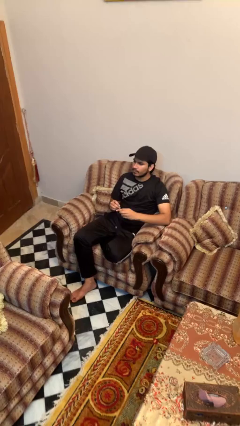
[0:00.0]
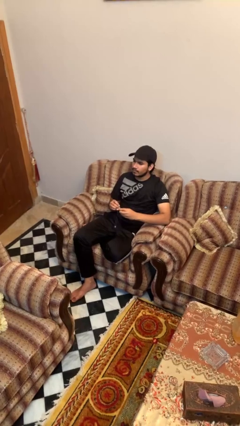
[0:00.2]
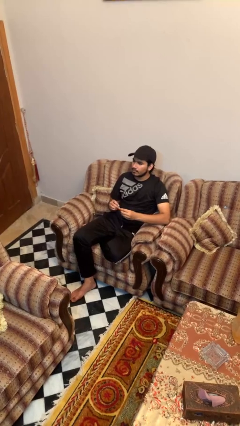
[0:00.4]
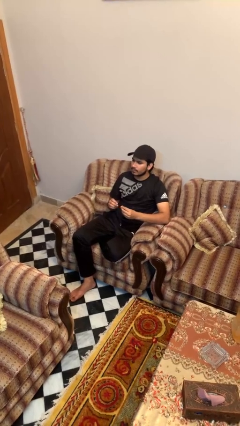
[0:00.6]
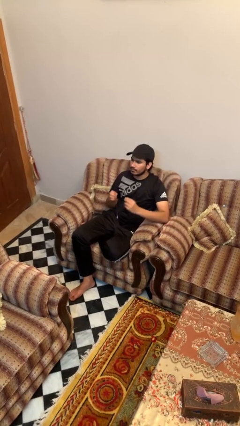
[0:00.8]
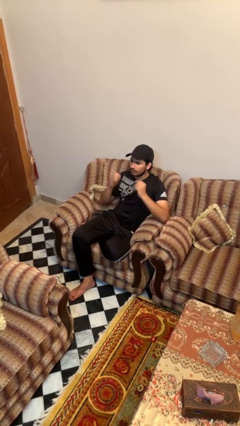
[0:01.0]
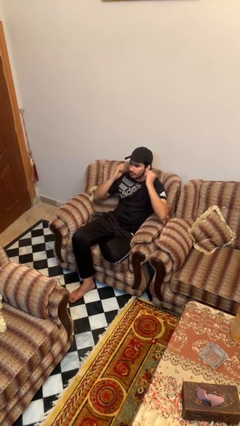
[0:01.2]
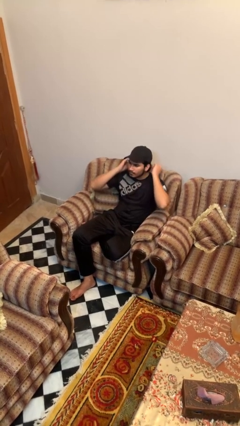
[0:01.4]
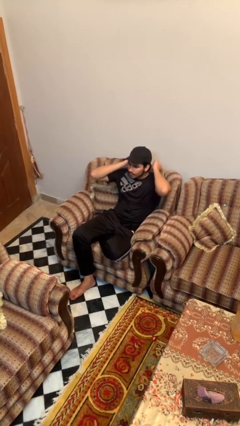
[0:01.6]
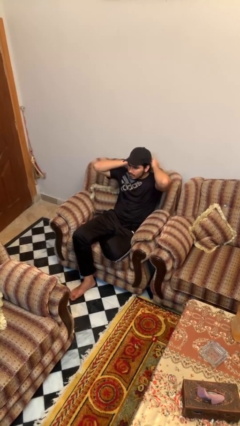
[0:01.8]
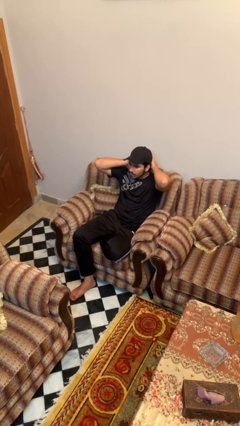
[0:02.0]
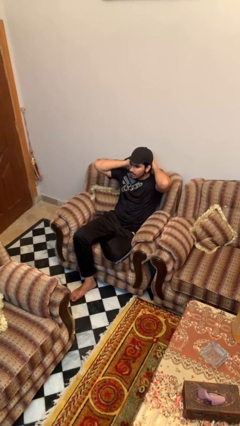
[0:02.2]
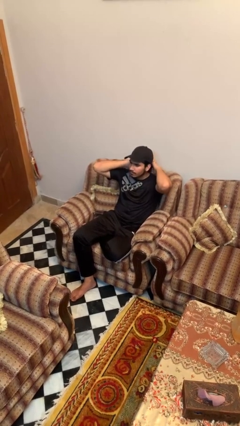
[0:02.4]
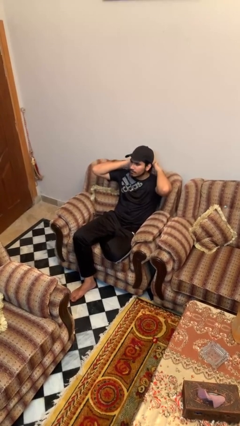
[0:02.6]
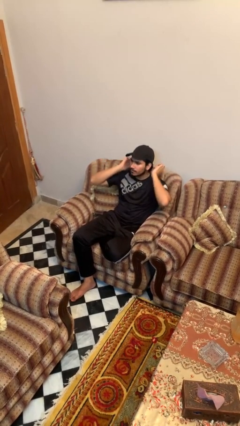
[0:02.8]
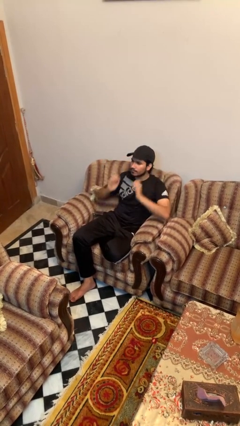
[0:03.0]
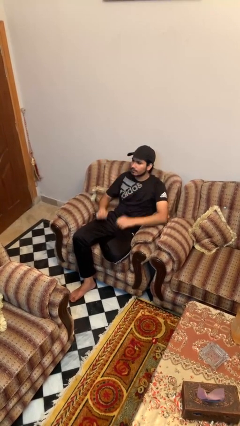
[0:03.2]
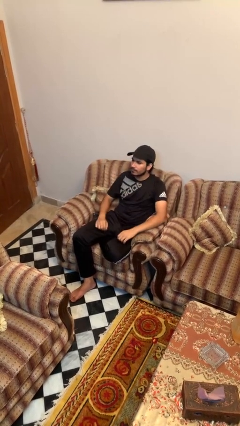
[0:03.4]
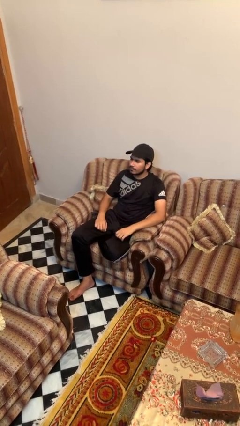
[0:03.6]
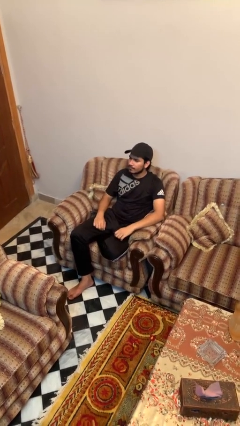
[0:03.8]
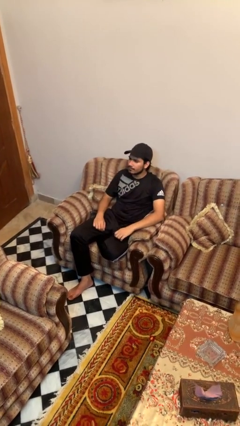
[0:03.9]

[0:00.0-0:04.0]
person puts on necklace

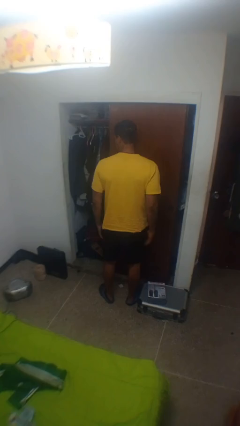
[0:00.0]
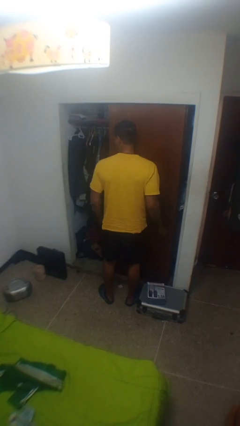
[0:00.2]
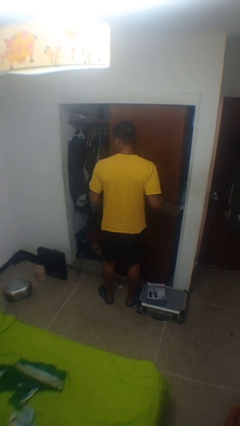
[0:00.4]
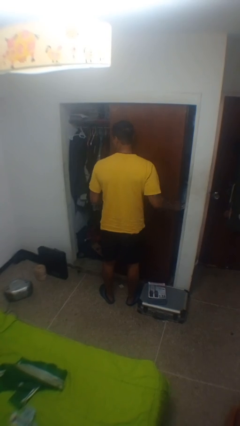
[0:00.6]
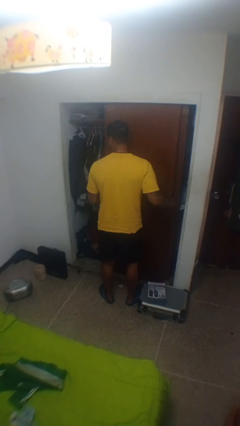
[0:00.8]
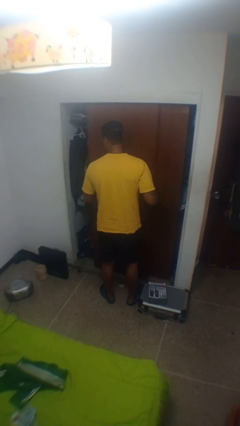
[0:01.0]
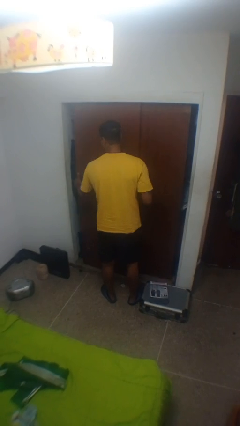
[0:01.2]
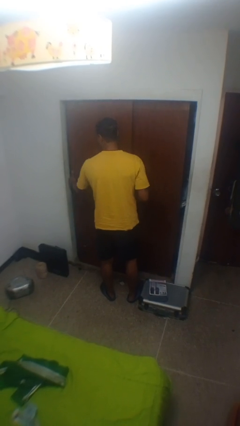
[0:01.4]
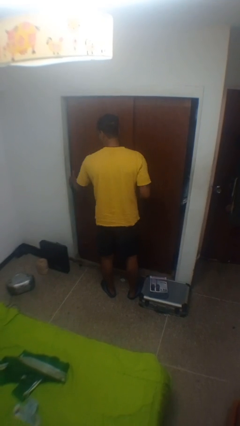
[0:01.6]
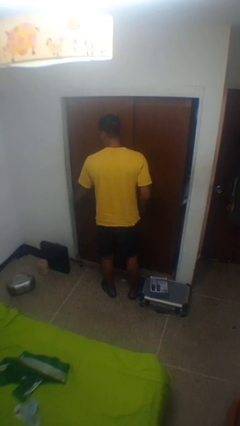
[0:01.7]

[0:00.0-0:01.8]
person closes closet door

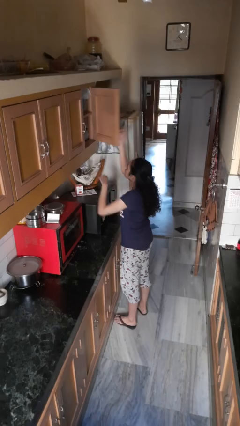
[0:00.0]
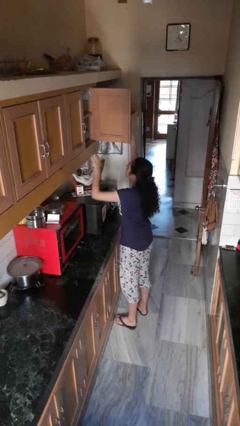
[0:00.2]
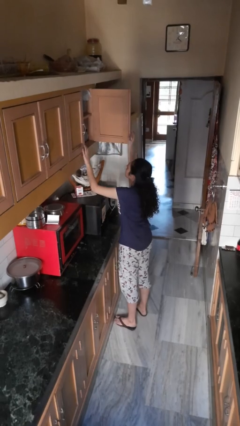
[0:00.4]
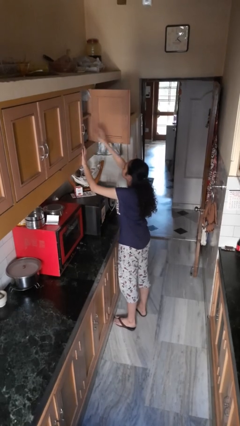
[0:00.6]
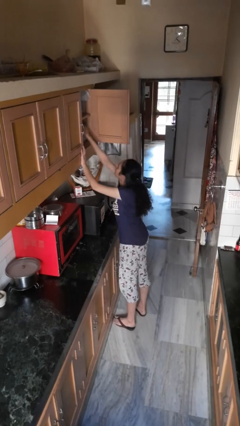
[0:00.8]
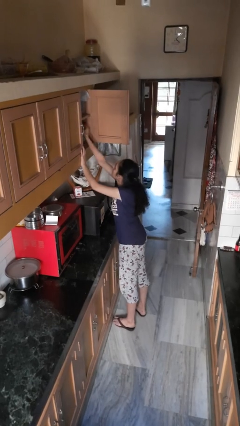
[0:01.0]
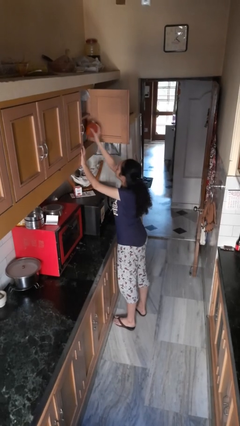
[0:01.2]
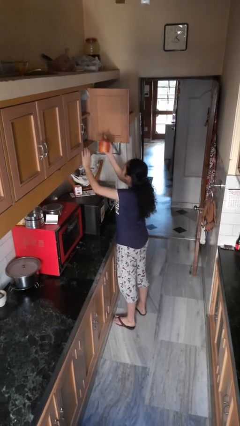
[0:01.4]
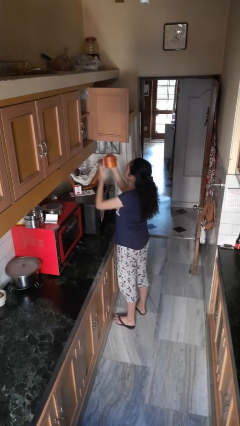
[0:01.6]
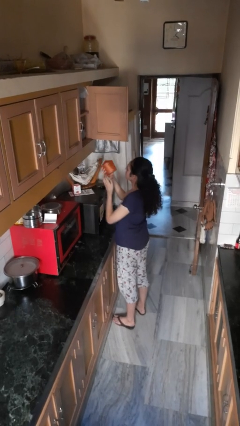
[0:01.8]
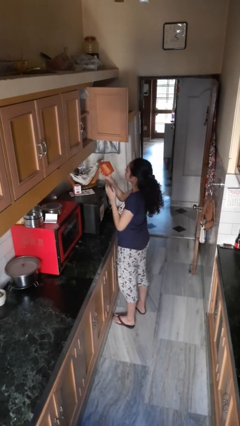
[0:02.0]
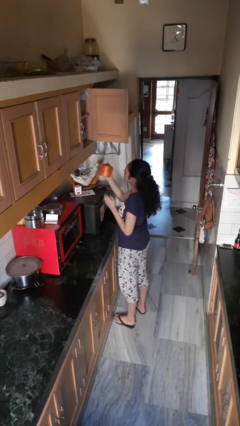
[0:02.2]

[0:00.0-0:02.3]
person takes object from cabinet

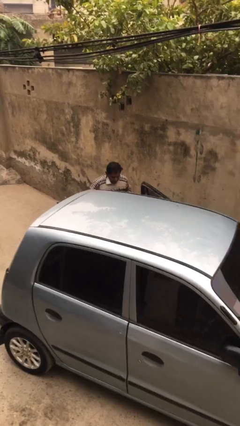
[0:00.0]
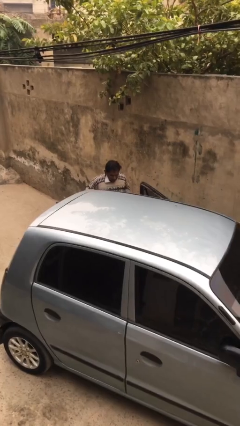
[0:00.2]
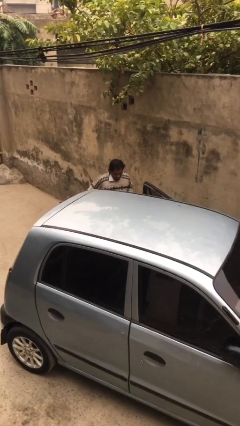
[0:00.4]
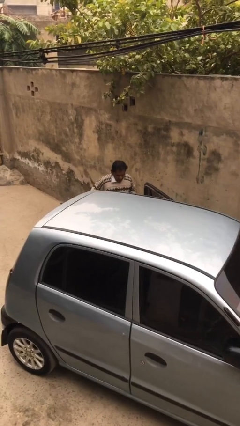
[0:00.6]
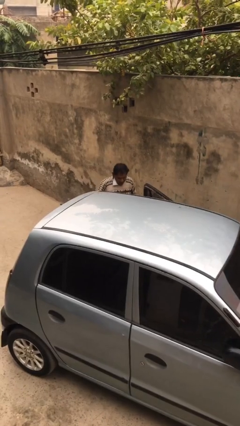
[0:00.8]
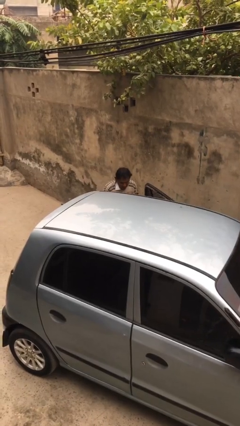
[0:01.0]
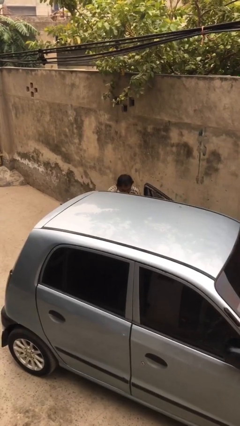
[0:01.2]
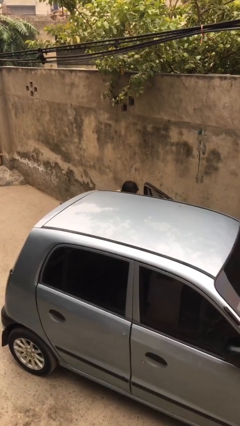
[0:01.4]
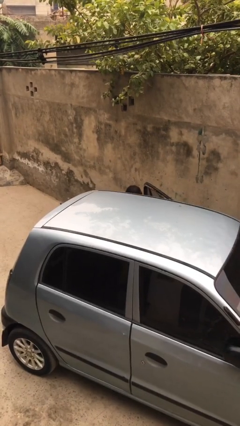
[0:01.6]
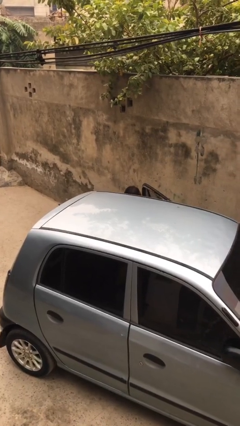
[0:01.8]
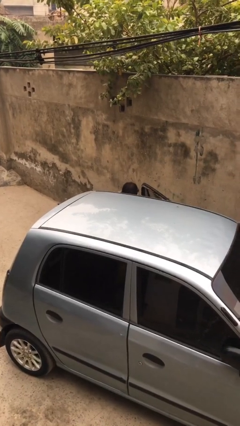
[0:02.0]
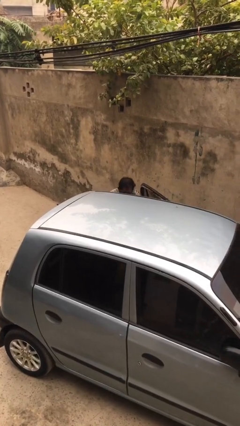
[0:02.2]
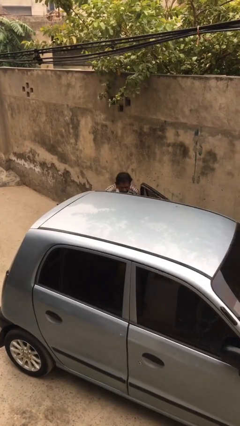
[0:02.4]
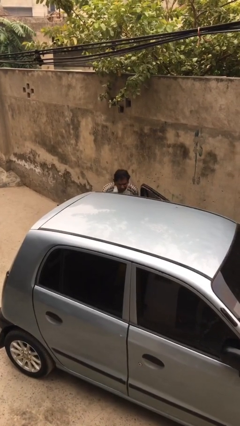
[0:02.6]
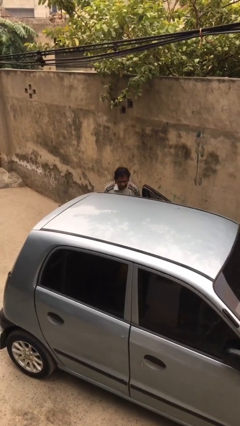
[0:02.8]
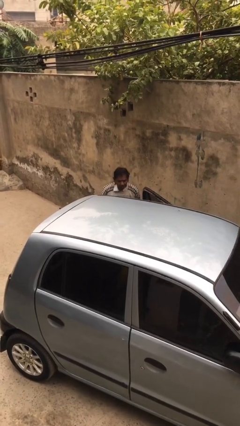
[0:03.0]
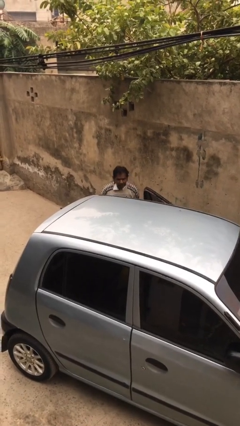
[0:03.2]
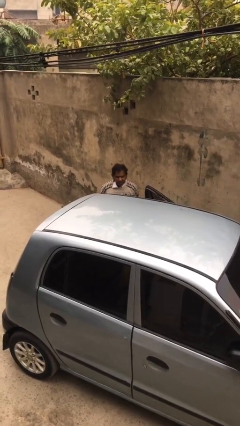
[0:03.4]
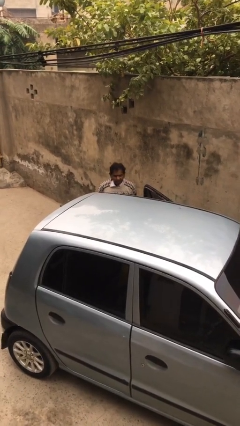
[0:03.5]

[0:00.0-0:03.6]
person unloads car

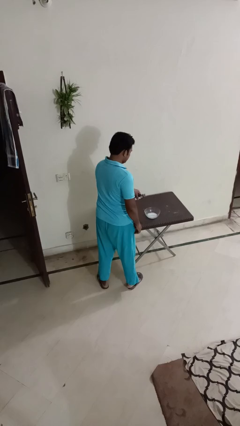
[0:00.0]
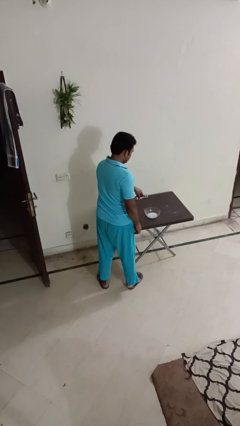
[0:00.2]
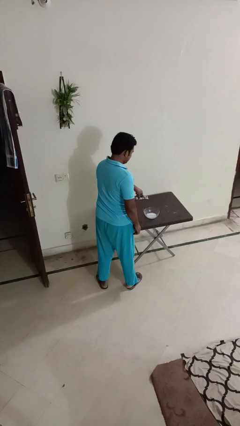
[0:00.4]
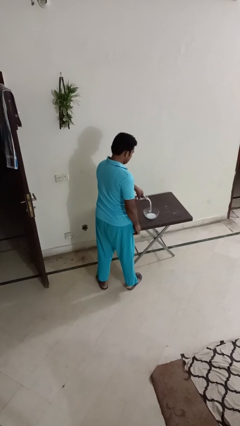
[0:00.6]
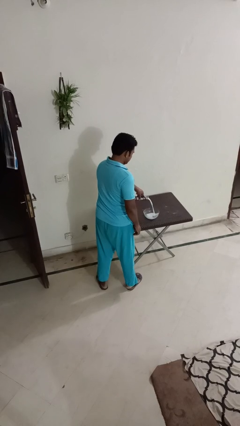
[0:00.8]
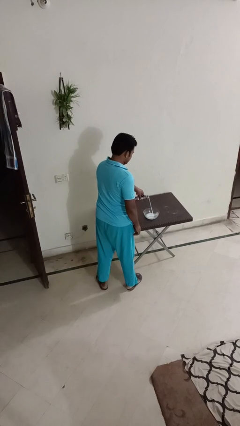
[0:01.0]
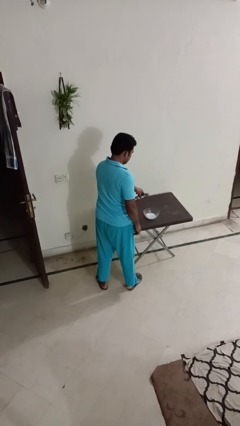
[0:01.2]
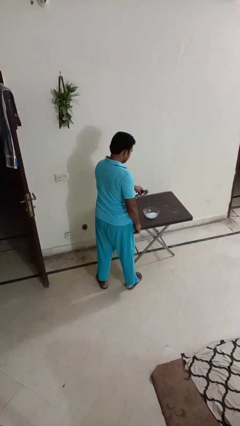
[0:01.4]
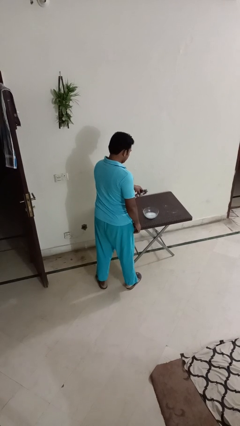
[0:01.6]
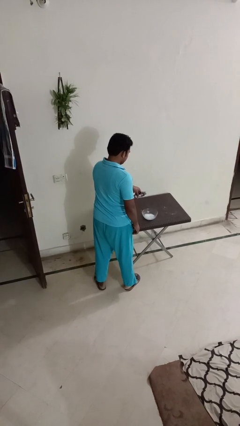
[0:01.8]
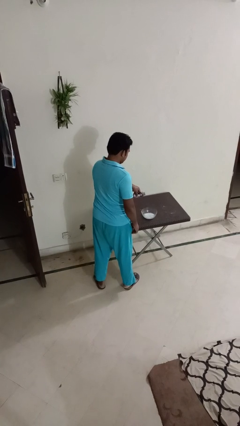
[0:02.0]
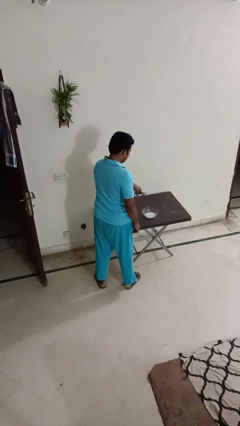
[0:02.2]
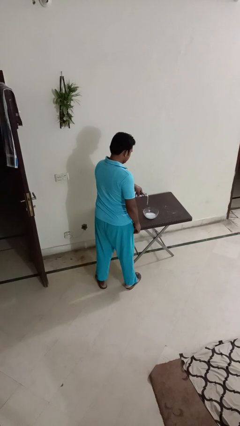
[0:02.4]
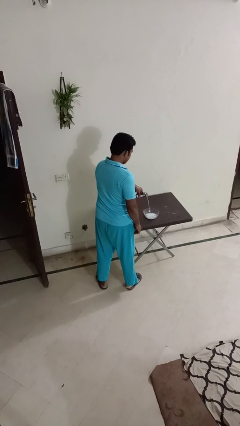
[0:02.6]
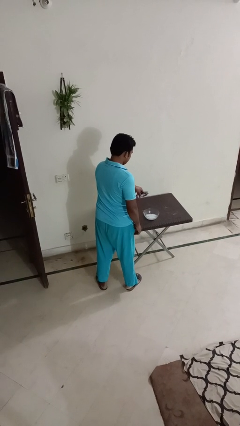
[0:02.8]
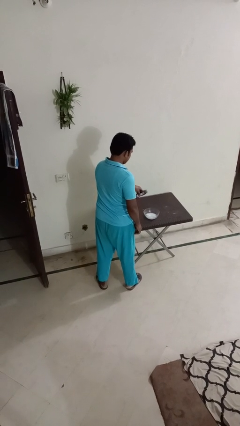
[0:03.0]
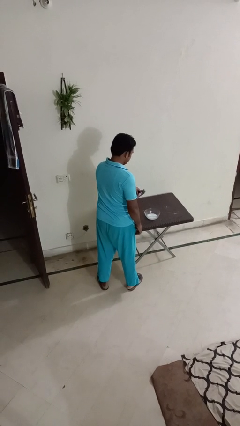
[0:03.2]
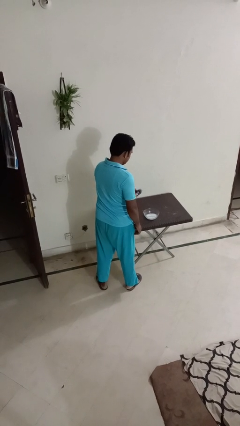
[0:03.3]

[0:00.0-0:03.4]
person pours into bowl

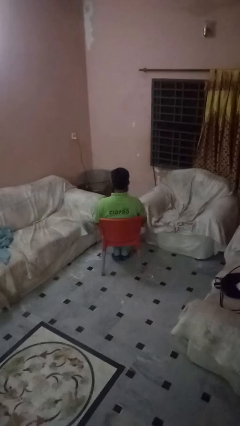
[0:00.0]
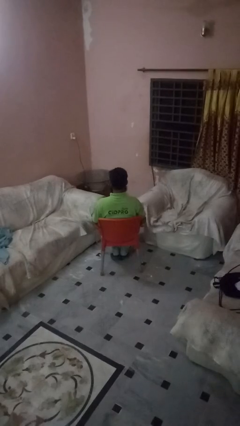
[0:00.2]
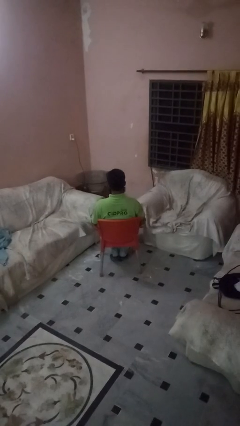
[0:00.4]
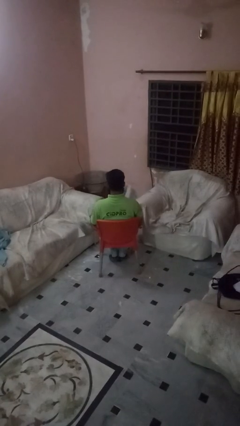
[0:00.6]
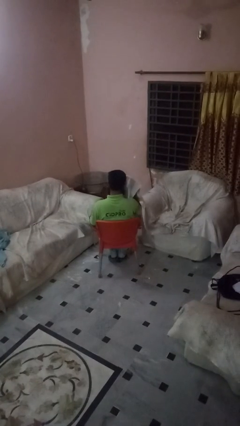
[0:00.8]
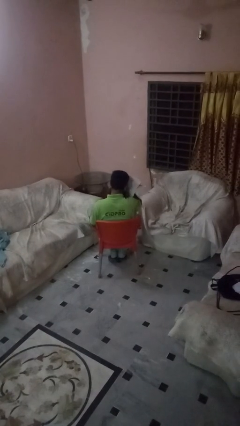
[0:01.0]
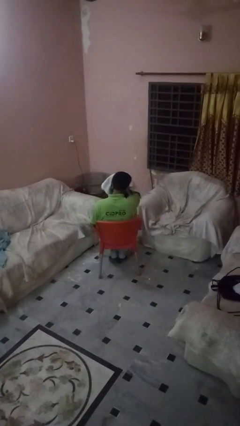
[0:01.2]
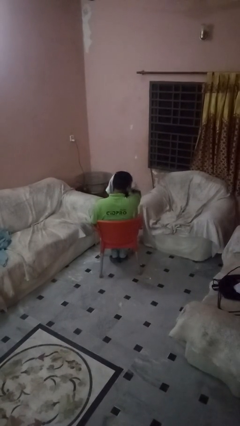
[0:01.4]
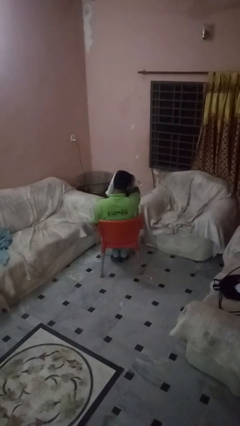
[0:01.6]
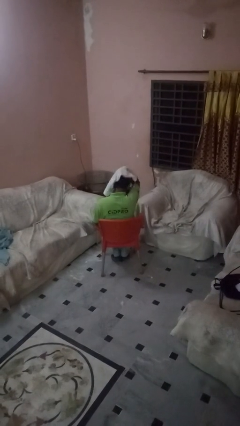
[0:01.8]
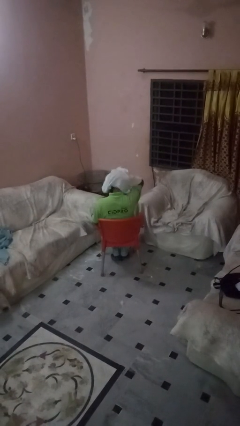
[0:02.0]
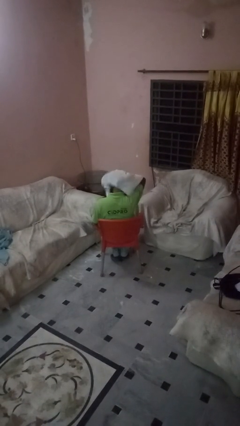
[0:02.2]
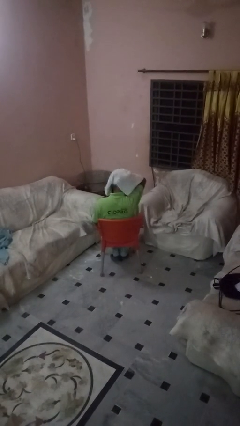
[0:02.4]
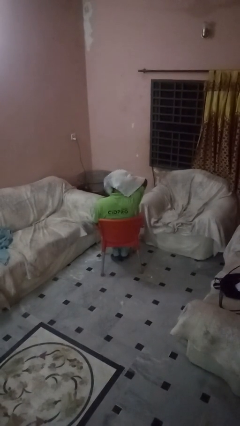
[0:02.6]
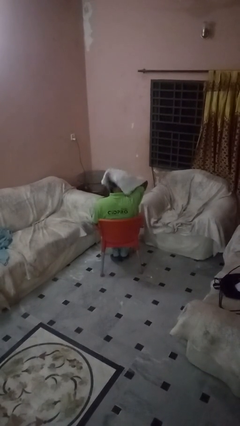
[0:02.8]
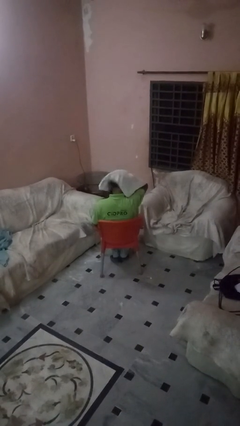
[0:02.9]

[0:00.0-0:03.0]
person dries hair with towel
